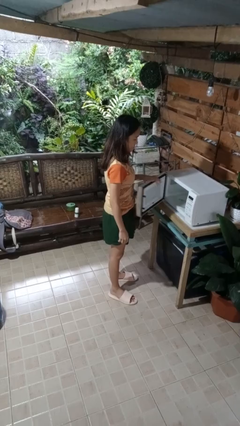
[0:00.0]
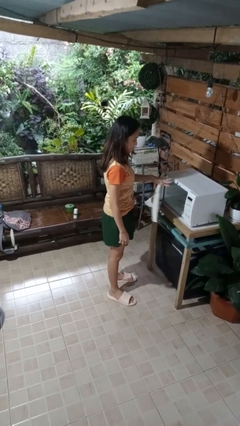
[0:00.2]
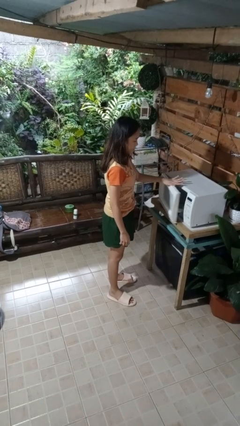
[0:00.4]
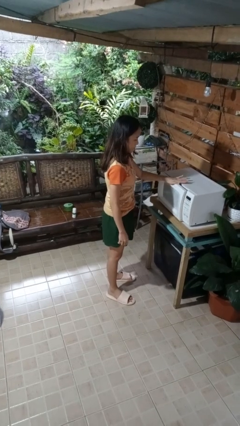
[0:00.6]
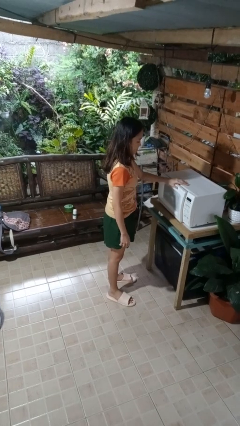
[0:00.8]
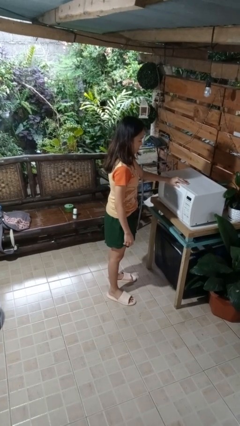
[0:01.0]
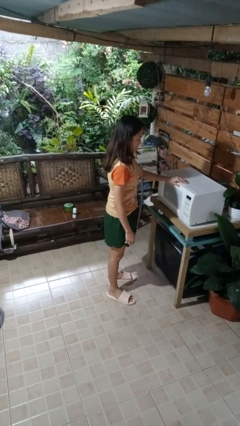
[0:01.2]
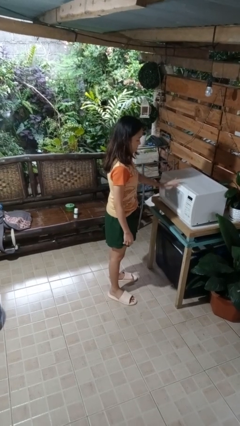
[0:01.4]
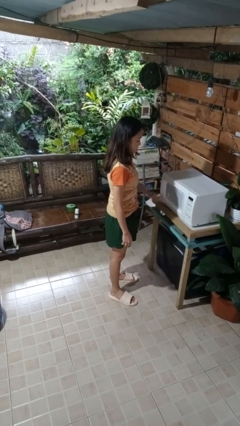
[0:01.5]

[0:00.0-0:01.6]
person closes microwave

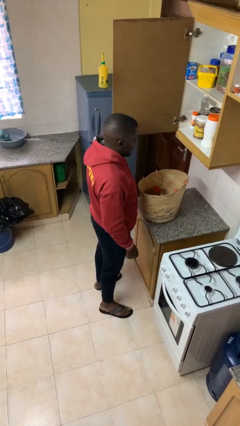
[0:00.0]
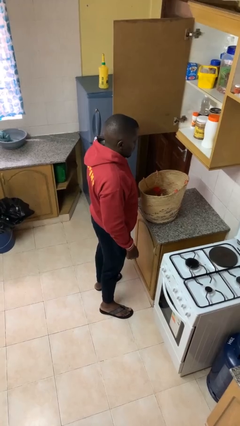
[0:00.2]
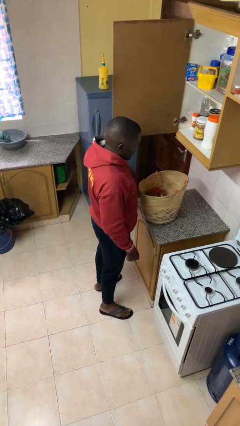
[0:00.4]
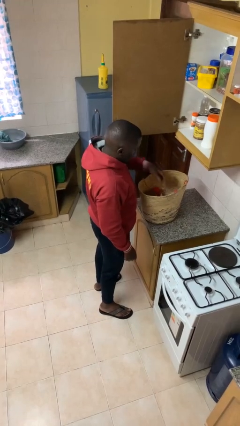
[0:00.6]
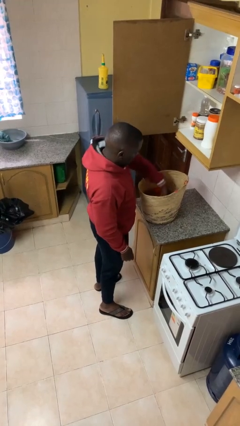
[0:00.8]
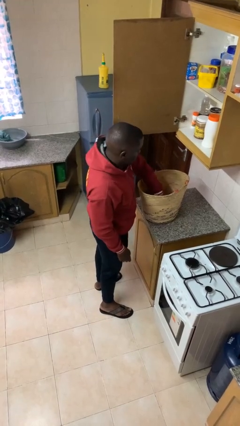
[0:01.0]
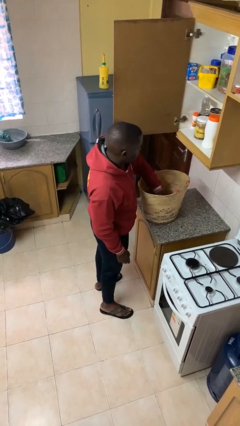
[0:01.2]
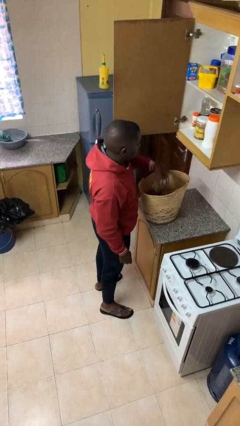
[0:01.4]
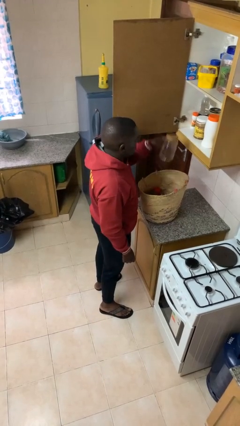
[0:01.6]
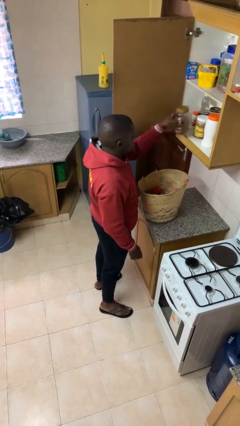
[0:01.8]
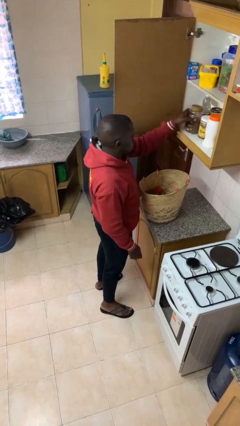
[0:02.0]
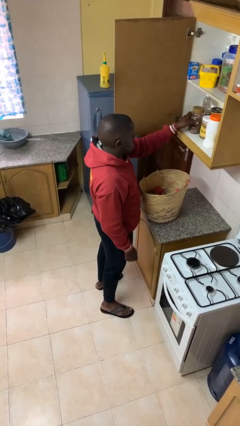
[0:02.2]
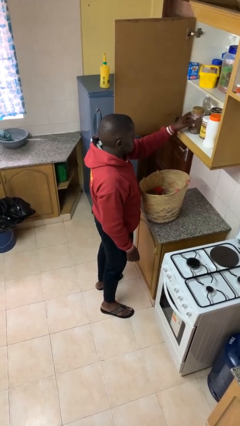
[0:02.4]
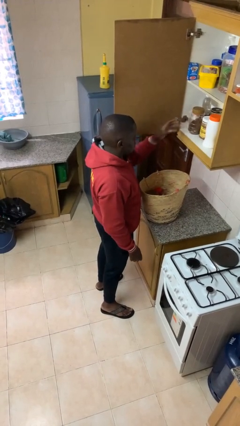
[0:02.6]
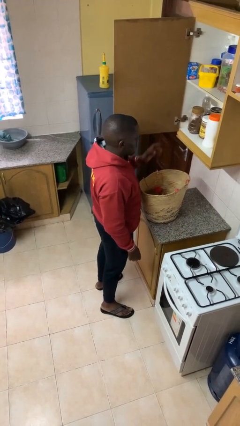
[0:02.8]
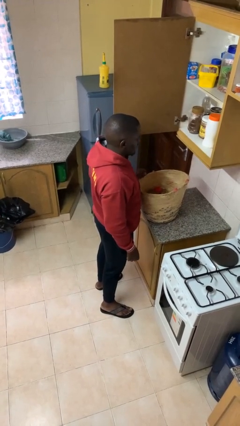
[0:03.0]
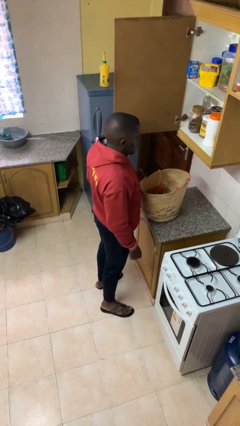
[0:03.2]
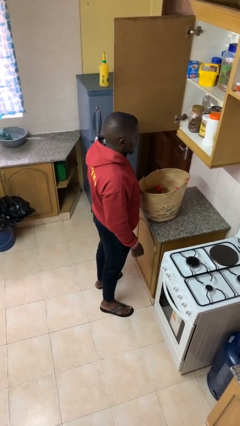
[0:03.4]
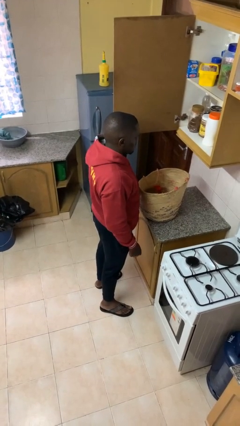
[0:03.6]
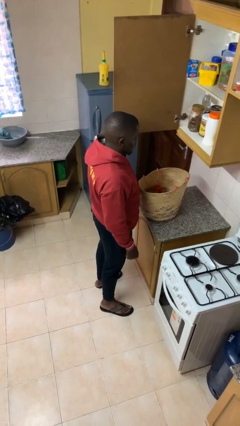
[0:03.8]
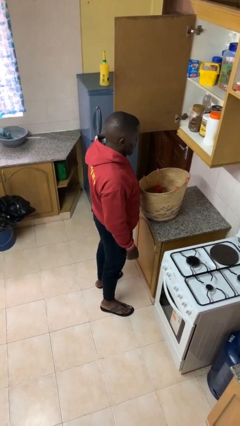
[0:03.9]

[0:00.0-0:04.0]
person loads groceries into cabinet

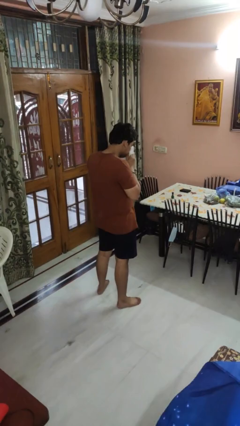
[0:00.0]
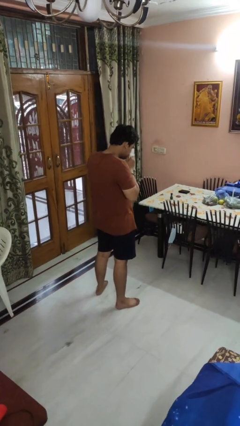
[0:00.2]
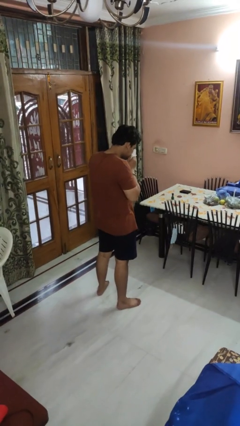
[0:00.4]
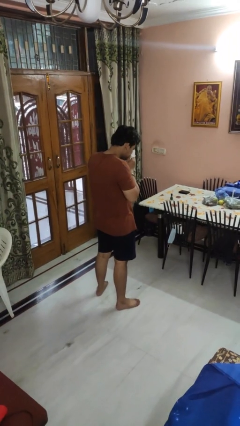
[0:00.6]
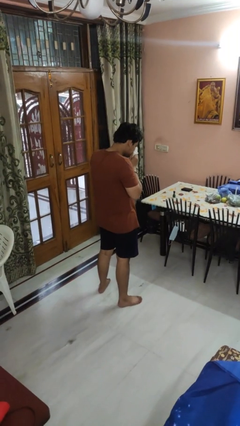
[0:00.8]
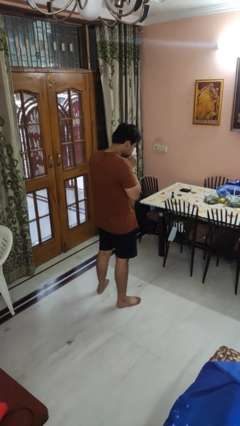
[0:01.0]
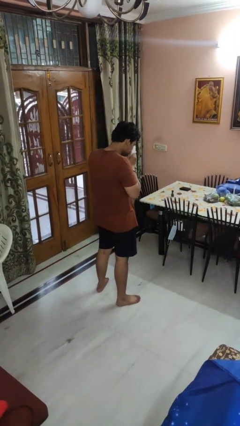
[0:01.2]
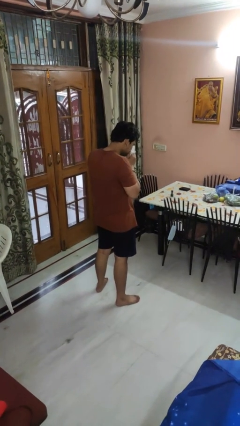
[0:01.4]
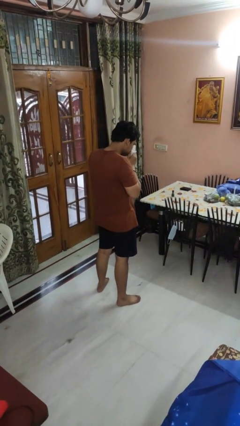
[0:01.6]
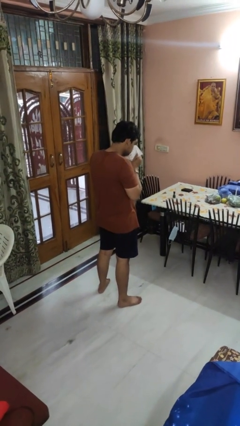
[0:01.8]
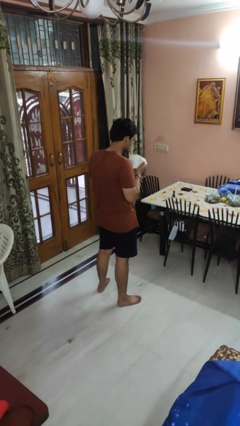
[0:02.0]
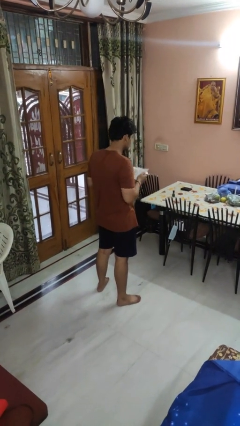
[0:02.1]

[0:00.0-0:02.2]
person blows nose

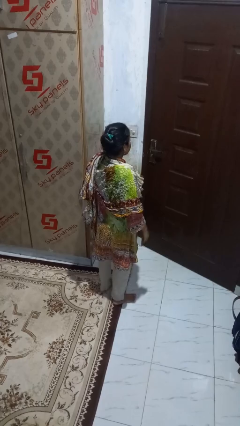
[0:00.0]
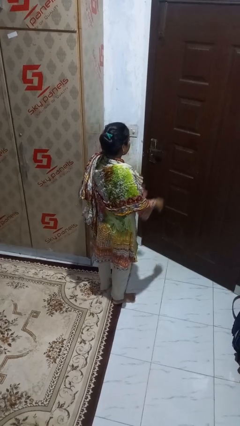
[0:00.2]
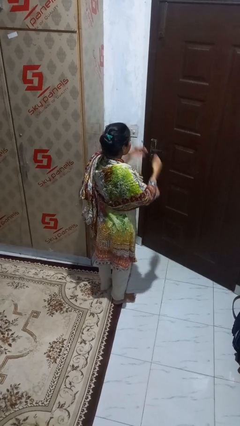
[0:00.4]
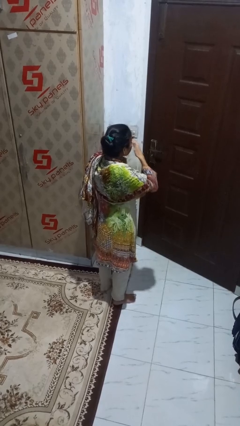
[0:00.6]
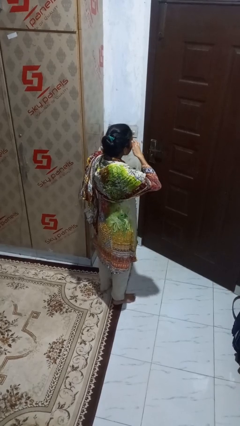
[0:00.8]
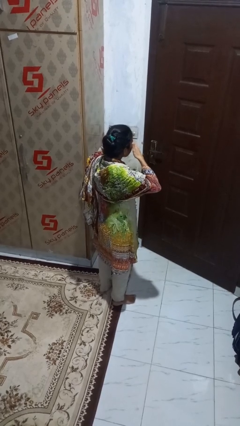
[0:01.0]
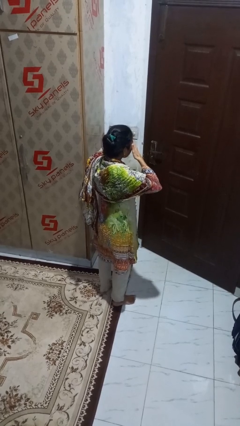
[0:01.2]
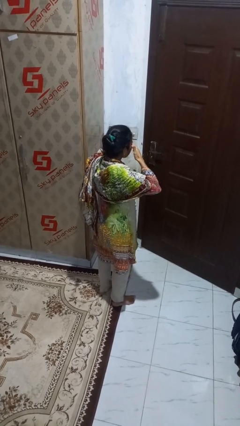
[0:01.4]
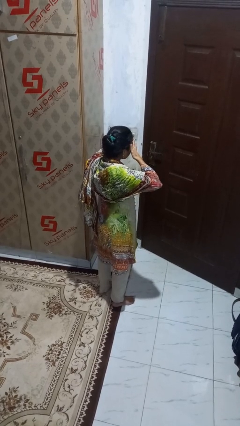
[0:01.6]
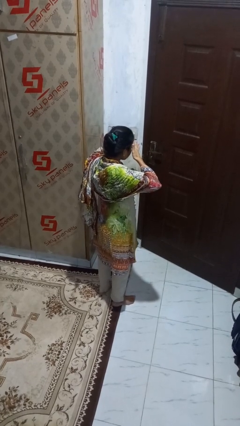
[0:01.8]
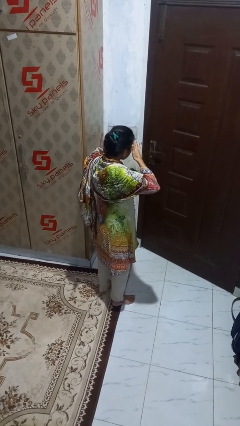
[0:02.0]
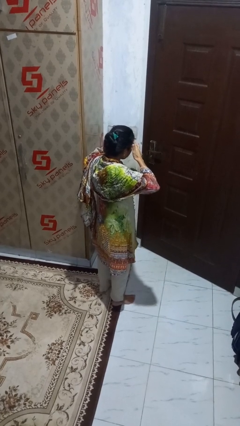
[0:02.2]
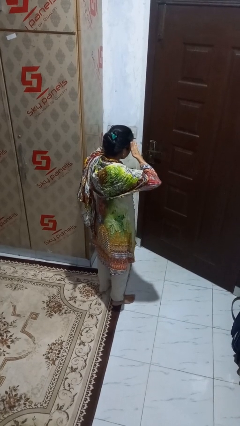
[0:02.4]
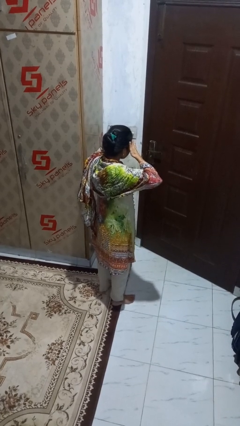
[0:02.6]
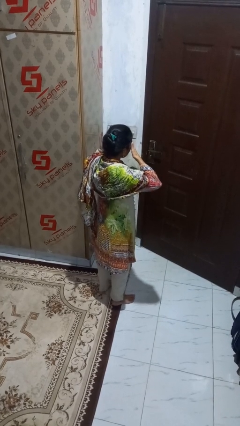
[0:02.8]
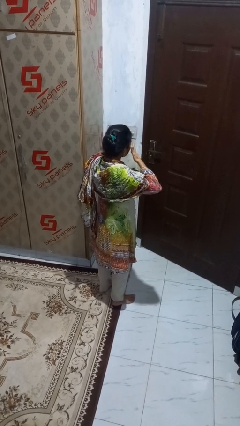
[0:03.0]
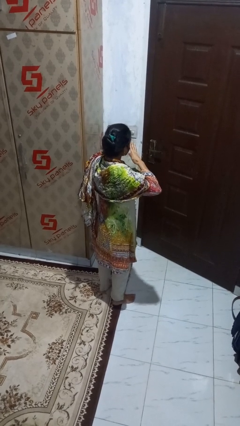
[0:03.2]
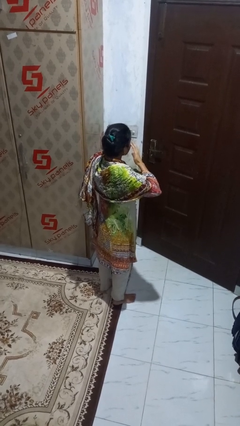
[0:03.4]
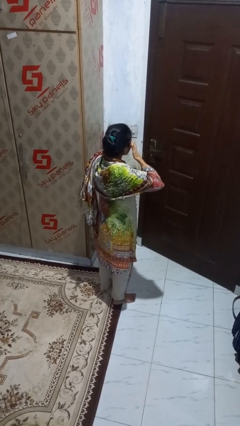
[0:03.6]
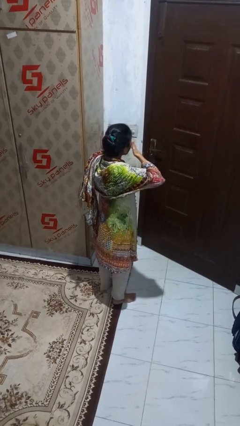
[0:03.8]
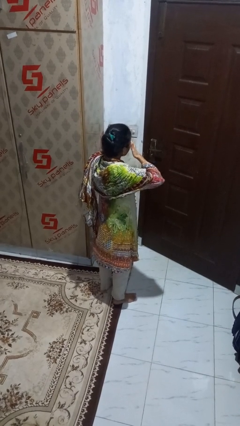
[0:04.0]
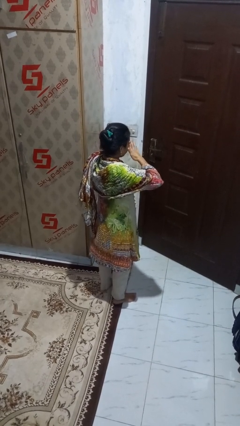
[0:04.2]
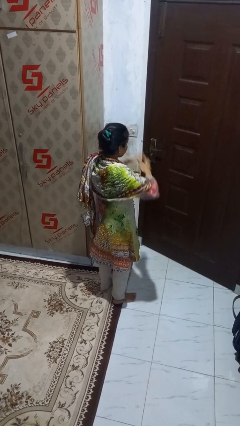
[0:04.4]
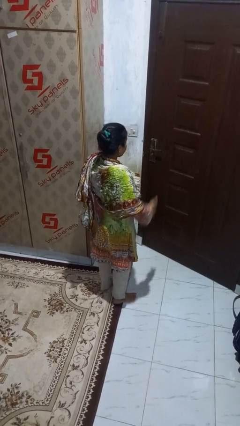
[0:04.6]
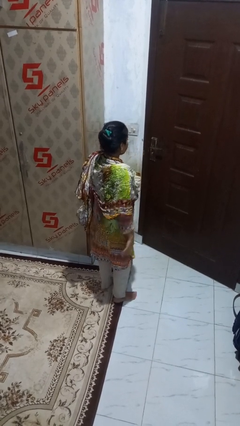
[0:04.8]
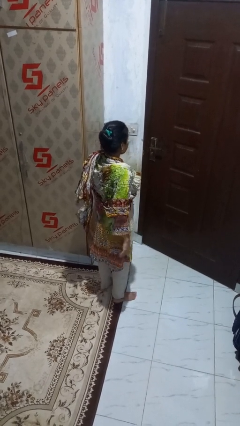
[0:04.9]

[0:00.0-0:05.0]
person rubs eyes

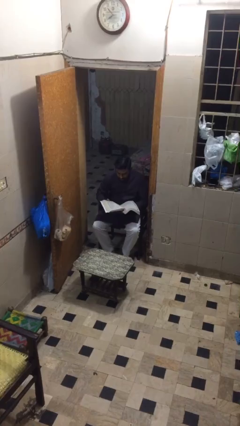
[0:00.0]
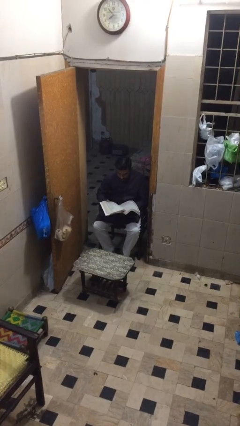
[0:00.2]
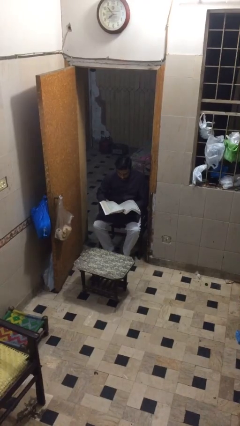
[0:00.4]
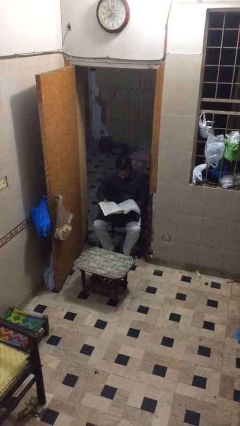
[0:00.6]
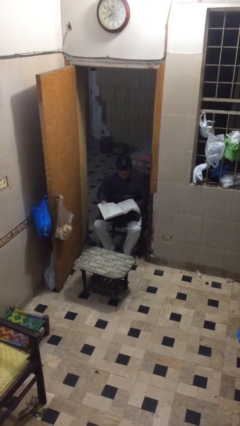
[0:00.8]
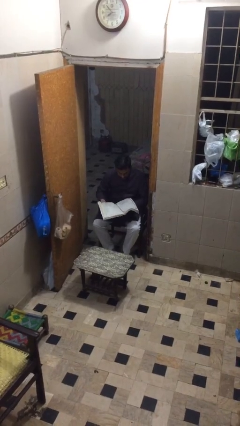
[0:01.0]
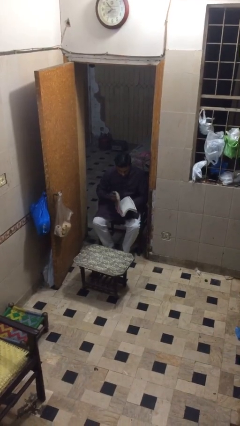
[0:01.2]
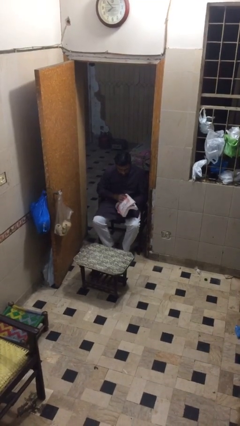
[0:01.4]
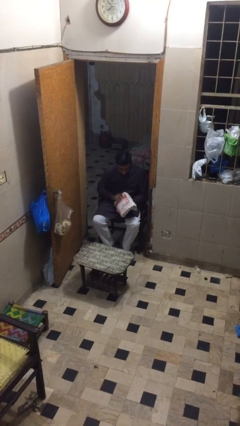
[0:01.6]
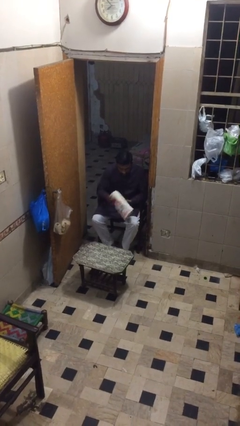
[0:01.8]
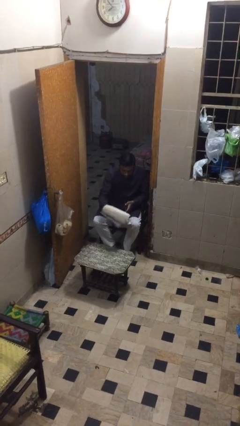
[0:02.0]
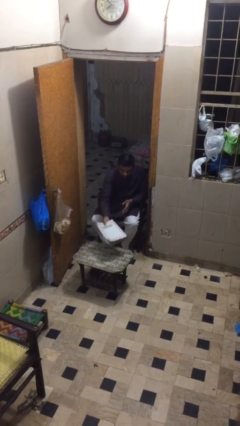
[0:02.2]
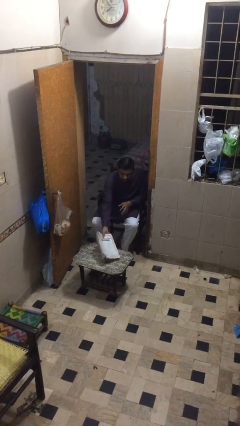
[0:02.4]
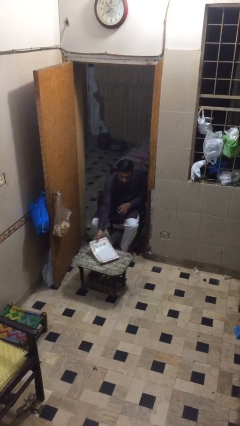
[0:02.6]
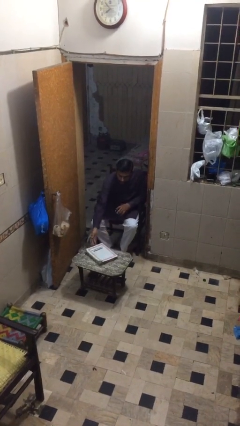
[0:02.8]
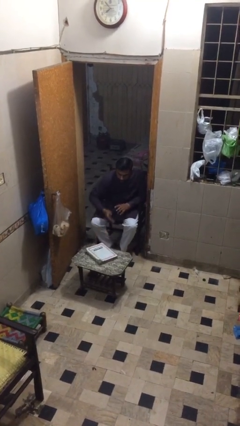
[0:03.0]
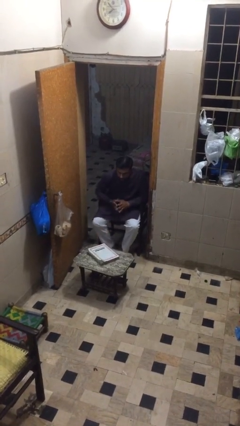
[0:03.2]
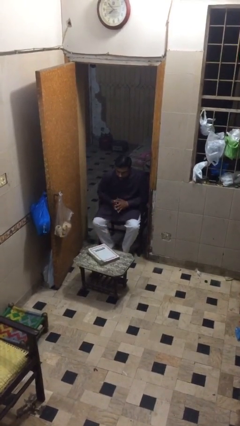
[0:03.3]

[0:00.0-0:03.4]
person puts down object on table

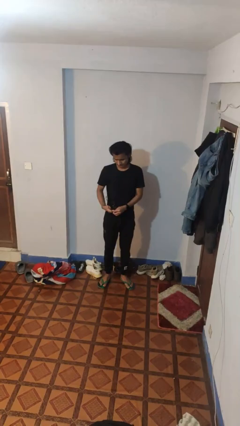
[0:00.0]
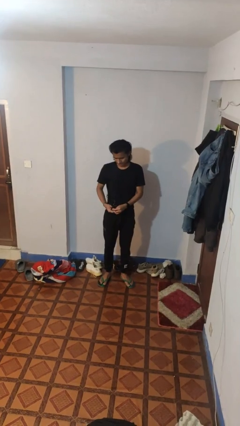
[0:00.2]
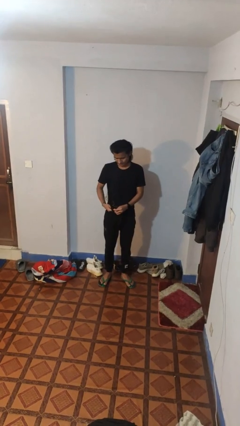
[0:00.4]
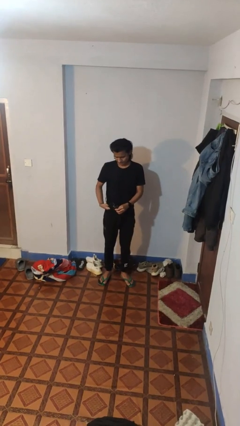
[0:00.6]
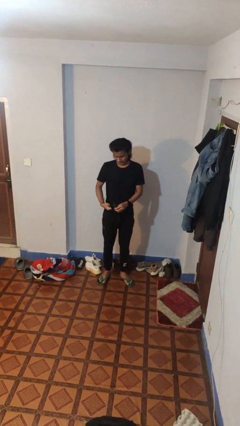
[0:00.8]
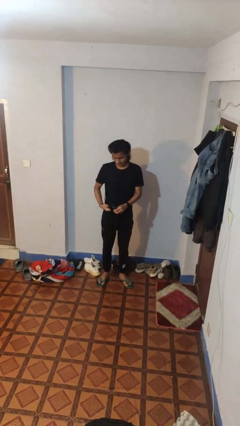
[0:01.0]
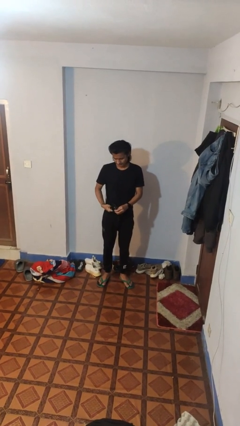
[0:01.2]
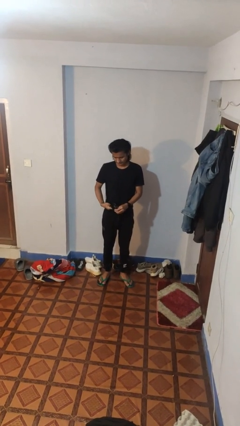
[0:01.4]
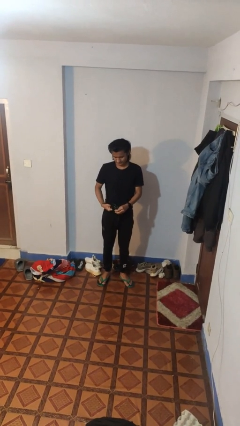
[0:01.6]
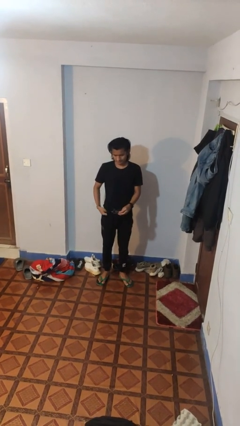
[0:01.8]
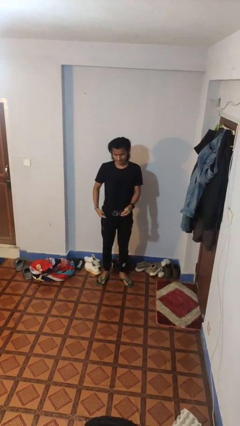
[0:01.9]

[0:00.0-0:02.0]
person cleans eyeglasses
